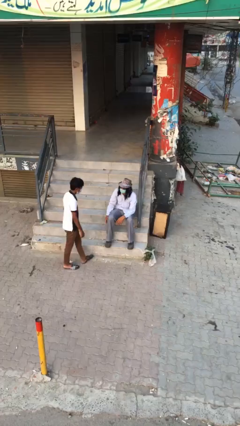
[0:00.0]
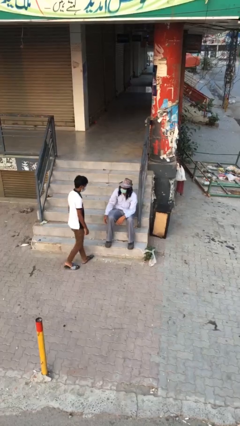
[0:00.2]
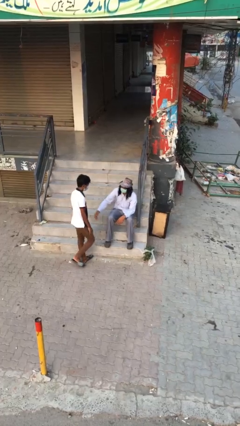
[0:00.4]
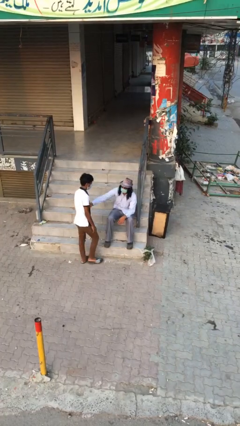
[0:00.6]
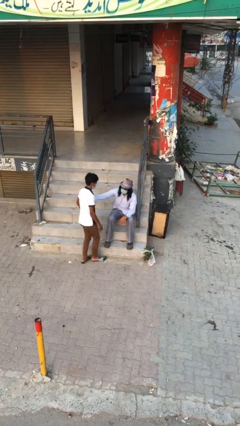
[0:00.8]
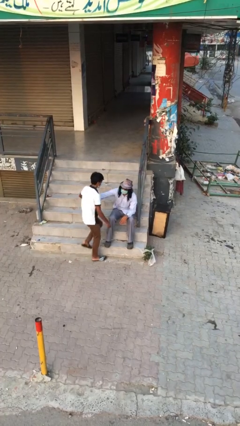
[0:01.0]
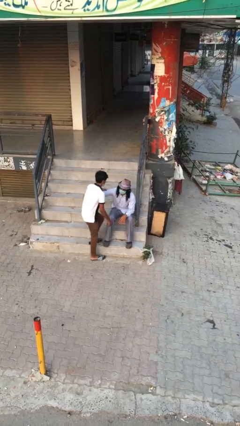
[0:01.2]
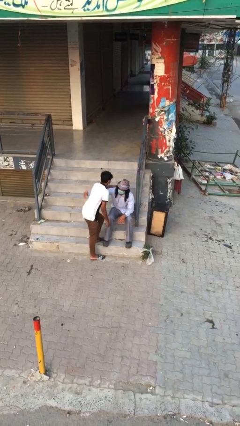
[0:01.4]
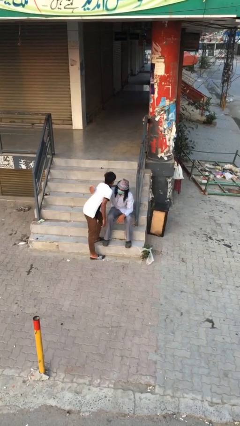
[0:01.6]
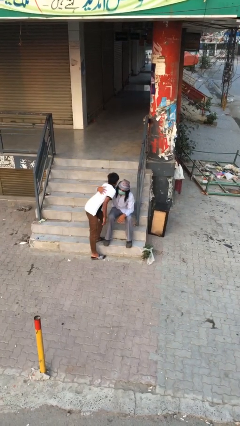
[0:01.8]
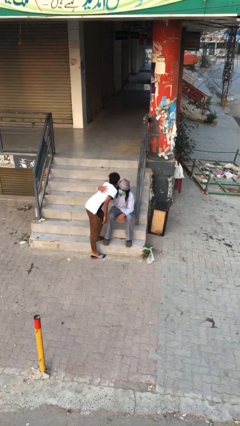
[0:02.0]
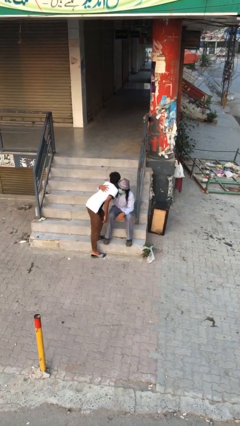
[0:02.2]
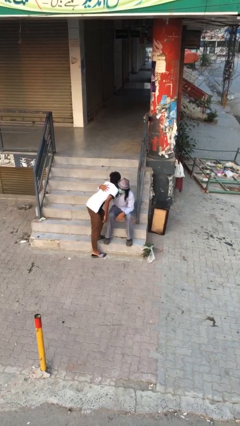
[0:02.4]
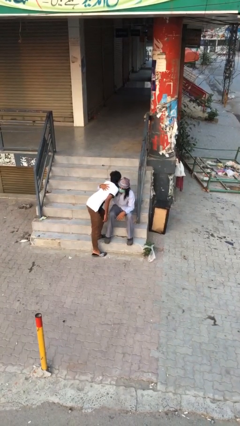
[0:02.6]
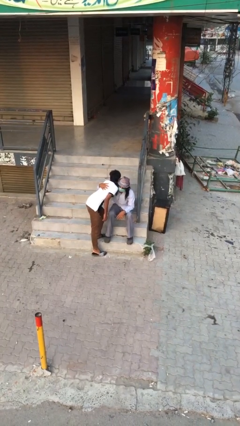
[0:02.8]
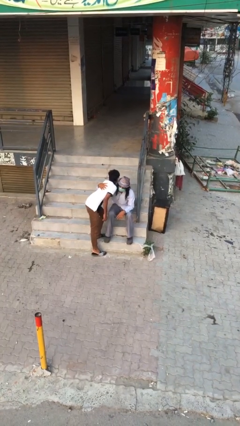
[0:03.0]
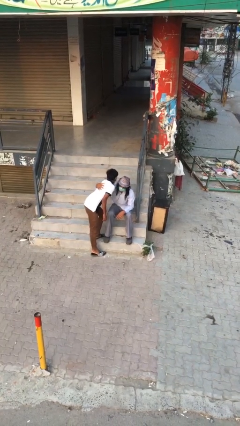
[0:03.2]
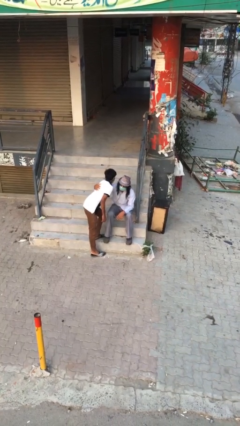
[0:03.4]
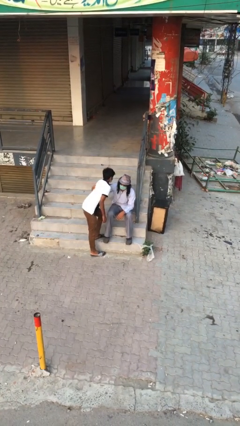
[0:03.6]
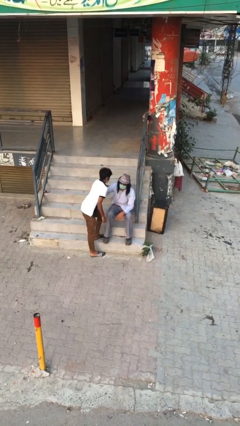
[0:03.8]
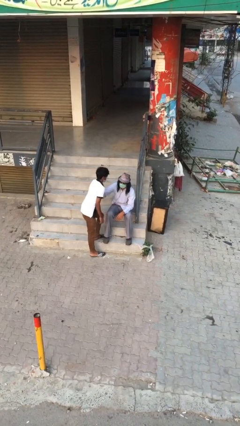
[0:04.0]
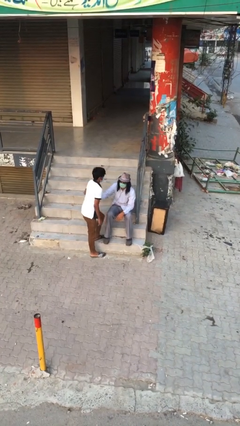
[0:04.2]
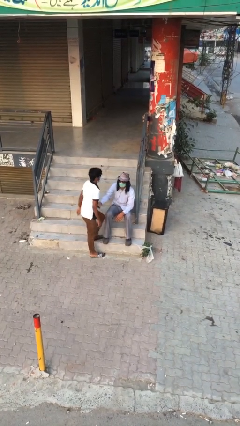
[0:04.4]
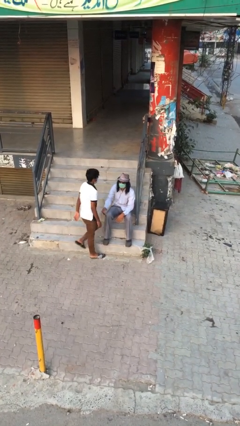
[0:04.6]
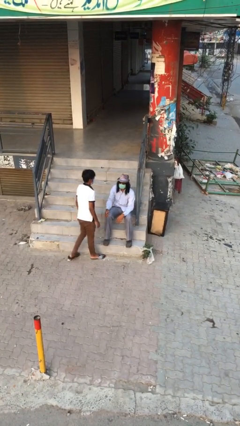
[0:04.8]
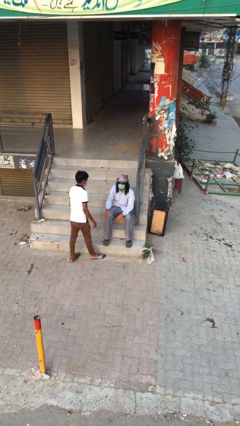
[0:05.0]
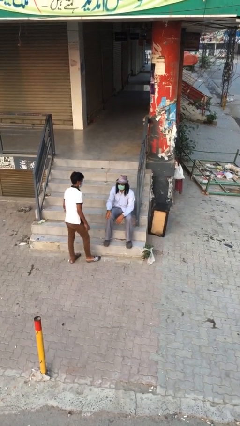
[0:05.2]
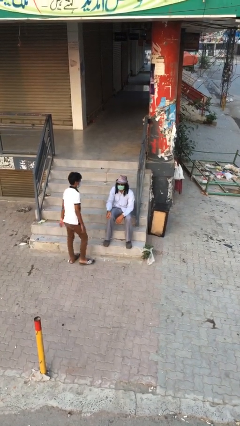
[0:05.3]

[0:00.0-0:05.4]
person embraces person

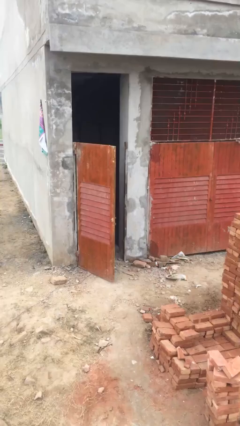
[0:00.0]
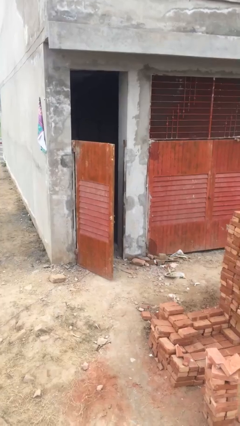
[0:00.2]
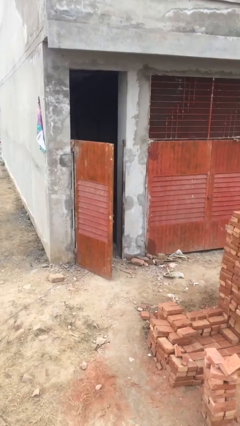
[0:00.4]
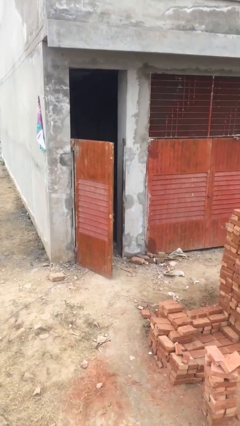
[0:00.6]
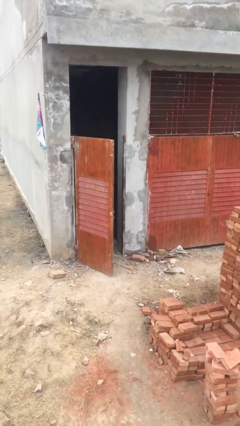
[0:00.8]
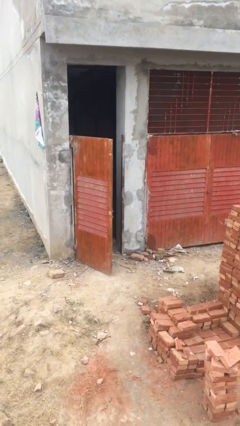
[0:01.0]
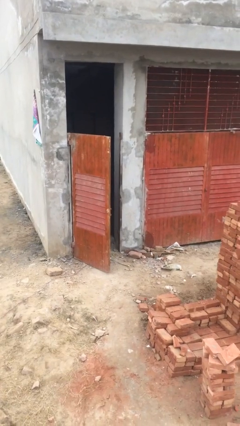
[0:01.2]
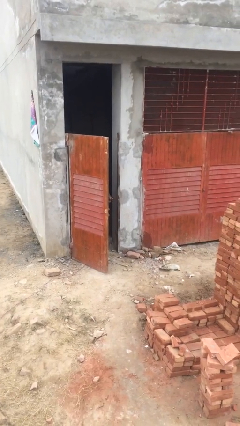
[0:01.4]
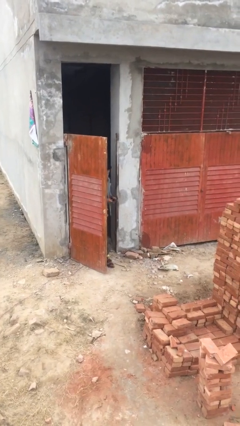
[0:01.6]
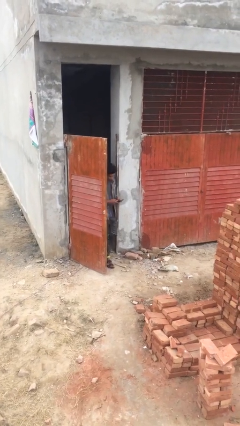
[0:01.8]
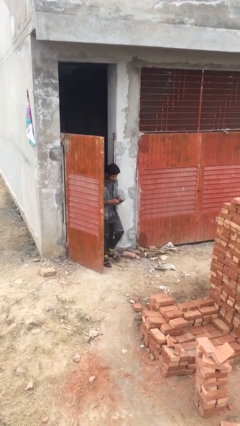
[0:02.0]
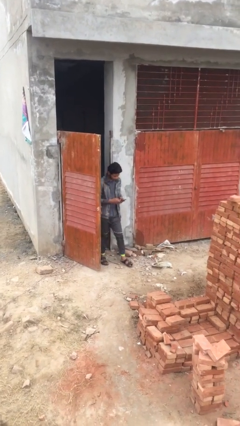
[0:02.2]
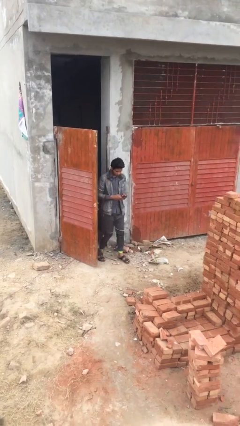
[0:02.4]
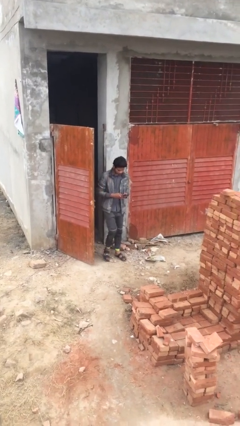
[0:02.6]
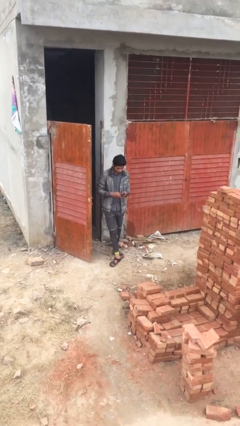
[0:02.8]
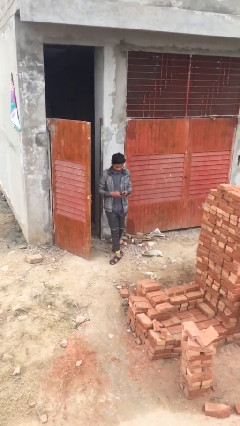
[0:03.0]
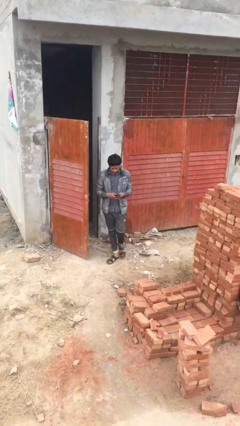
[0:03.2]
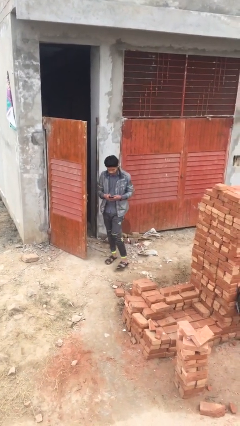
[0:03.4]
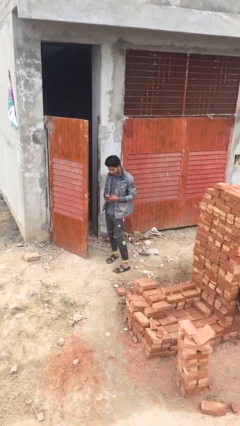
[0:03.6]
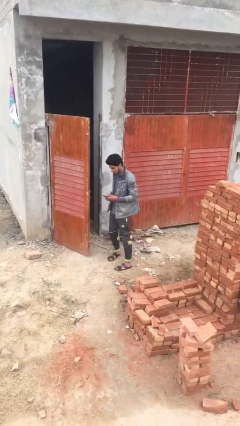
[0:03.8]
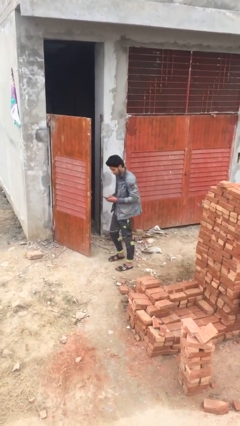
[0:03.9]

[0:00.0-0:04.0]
person enters scene through structure

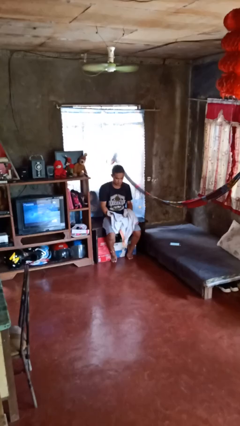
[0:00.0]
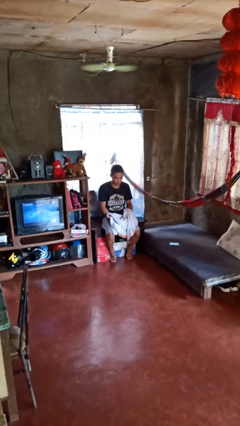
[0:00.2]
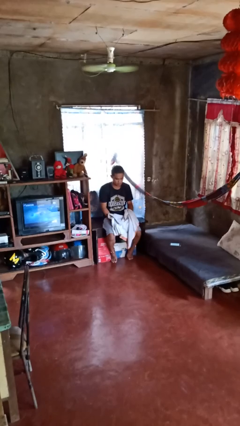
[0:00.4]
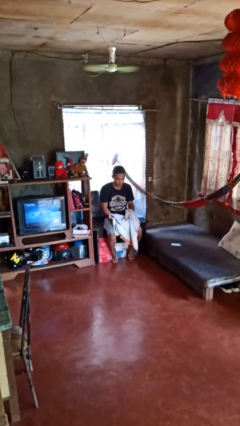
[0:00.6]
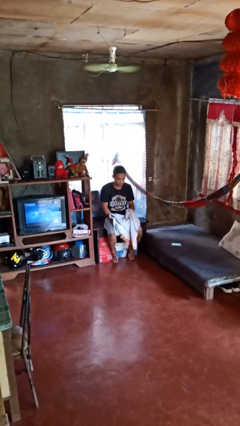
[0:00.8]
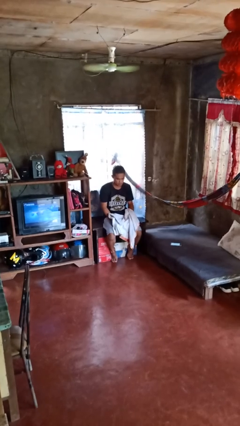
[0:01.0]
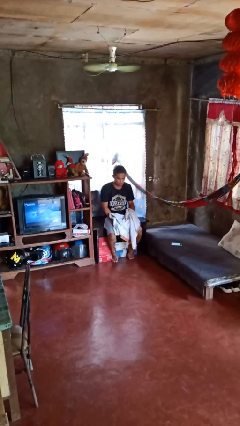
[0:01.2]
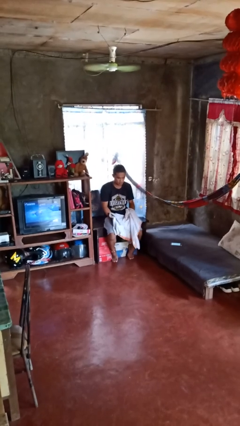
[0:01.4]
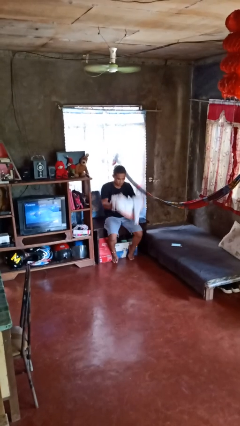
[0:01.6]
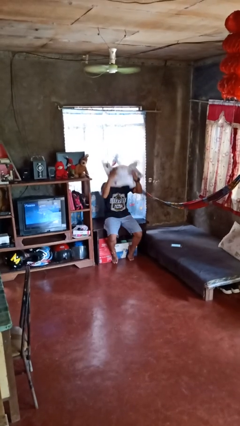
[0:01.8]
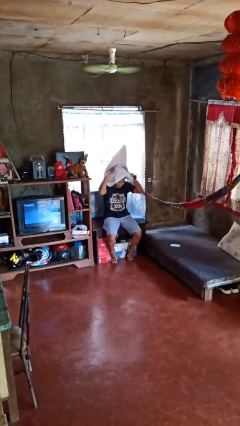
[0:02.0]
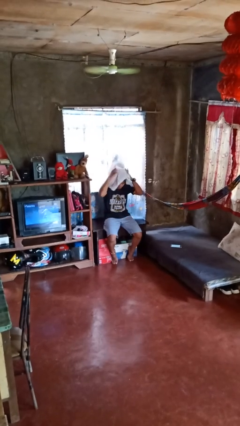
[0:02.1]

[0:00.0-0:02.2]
person wraps box

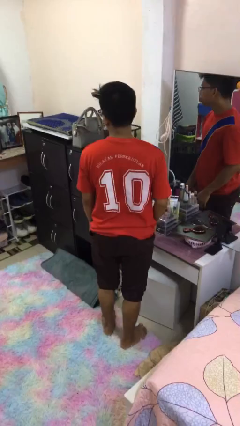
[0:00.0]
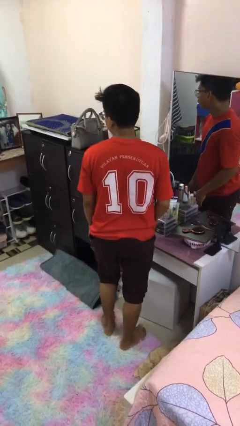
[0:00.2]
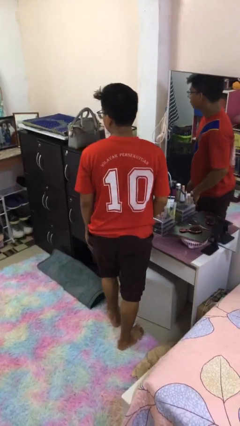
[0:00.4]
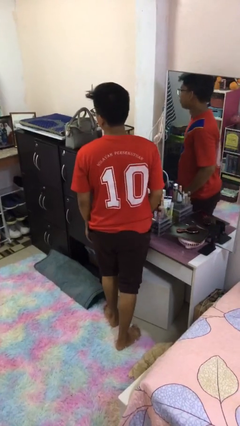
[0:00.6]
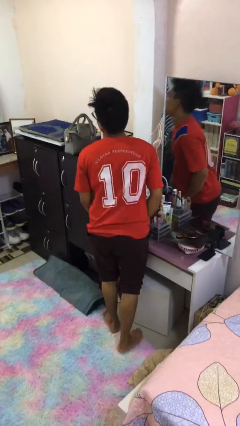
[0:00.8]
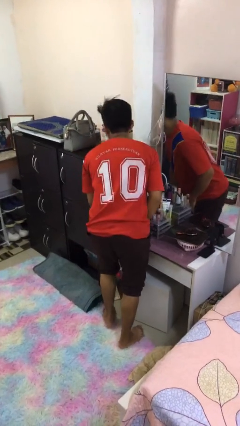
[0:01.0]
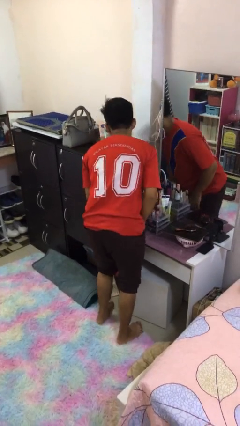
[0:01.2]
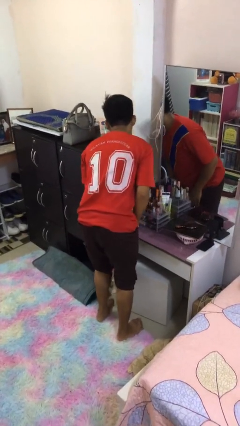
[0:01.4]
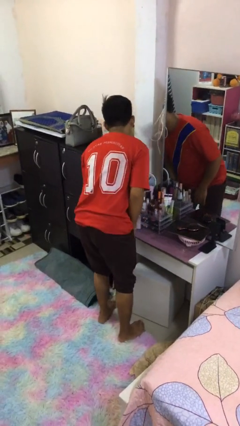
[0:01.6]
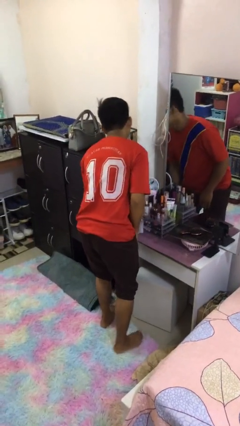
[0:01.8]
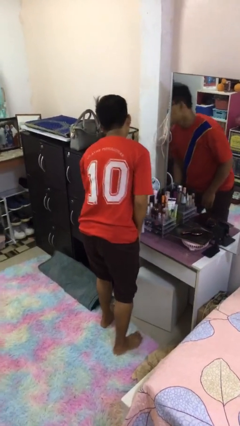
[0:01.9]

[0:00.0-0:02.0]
person bumps into table

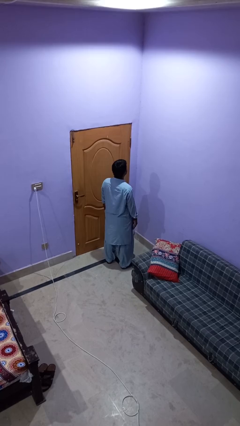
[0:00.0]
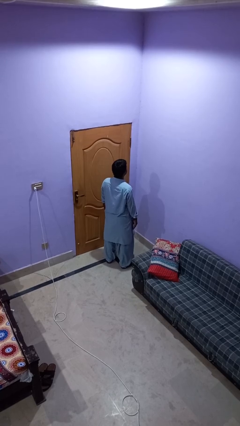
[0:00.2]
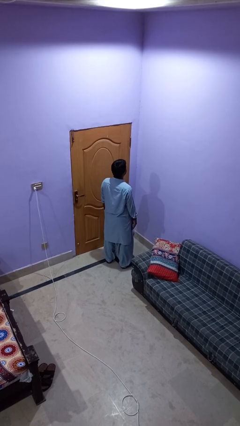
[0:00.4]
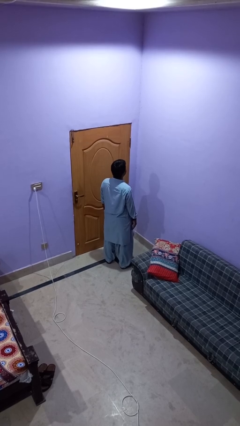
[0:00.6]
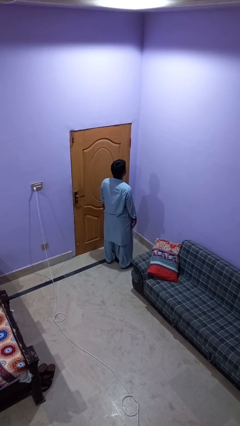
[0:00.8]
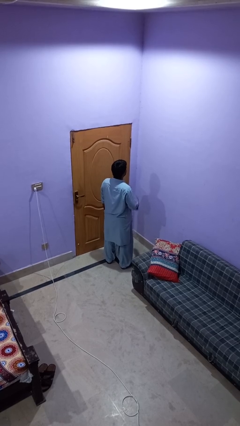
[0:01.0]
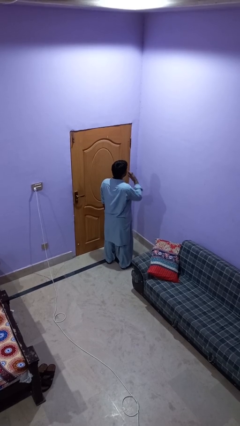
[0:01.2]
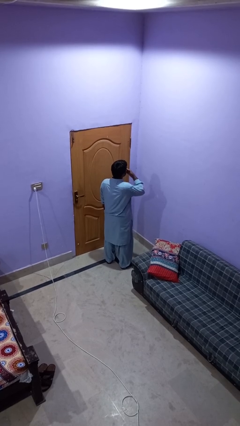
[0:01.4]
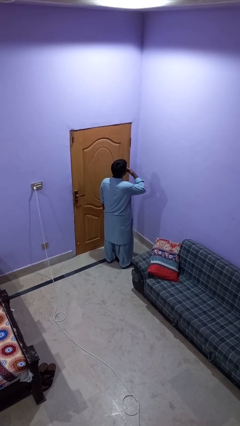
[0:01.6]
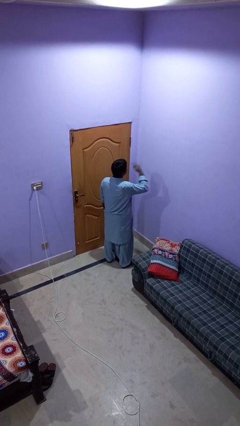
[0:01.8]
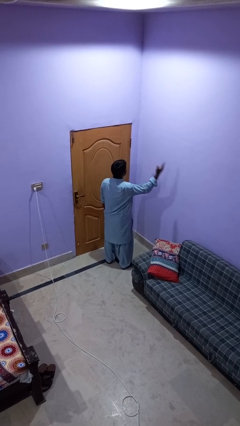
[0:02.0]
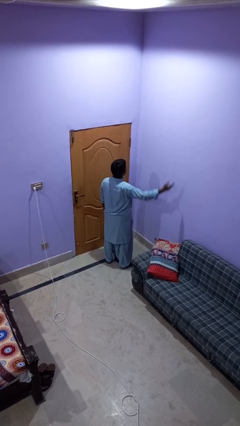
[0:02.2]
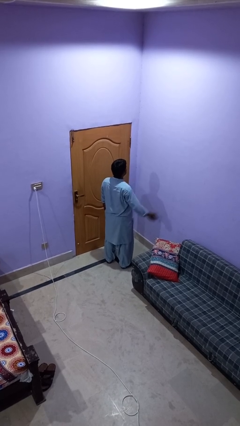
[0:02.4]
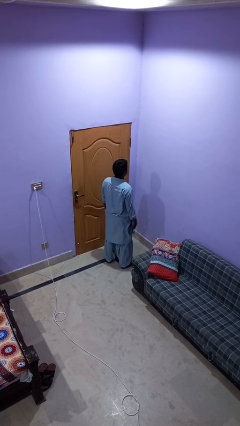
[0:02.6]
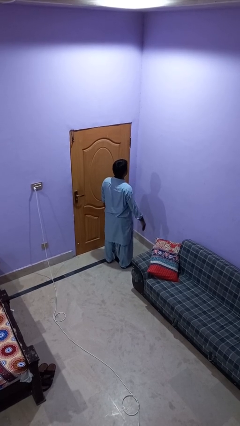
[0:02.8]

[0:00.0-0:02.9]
person gestures blow kiss

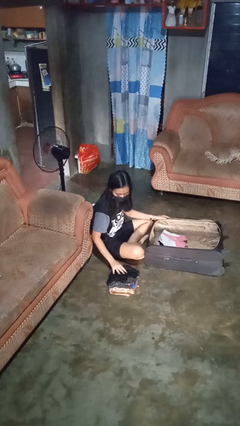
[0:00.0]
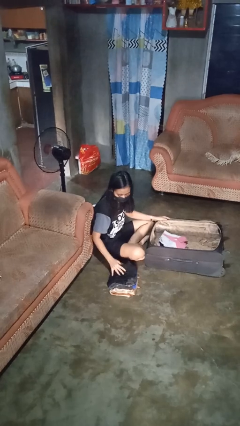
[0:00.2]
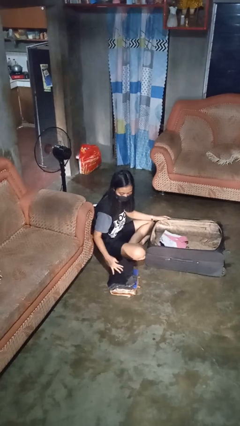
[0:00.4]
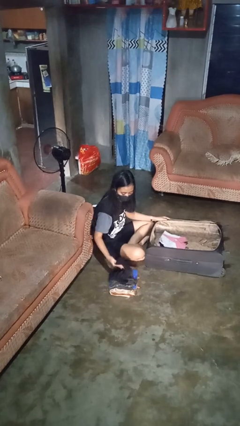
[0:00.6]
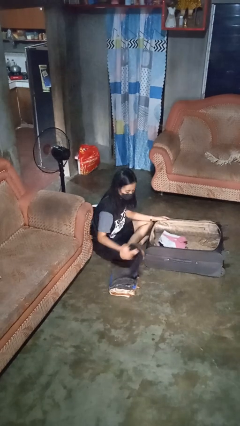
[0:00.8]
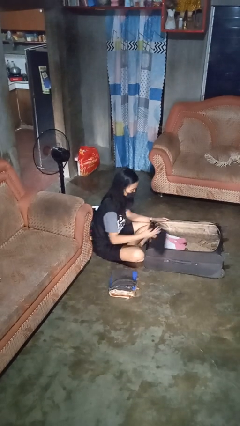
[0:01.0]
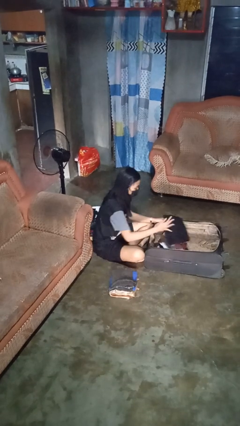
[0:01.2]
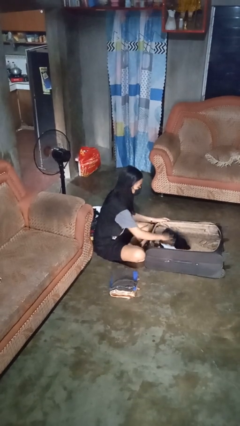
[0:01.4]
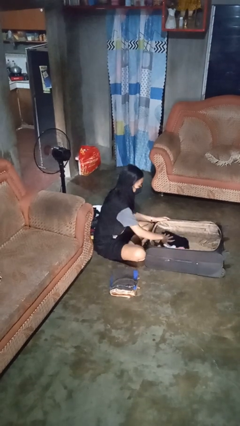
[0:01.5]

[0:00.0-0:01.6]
person loads clothes into suitcase
